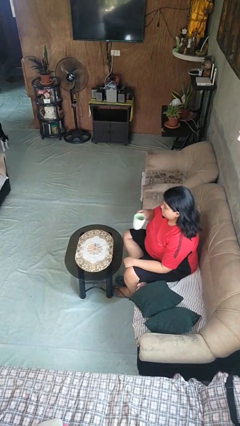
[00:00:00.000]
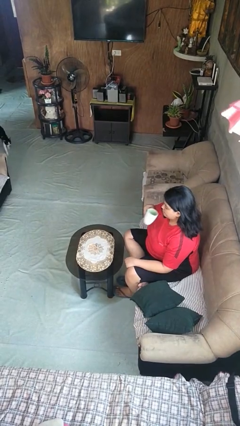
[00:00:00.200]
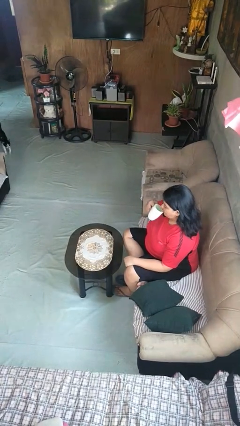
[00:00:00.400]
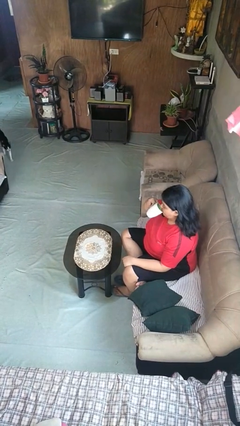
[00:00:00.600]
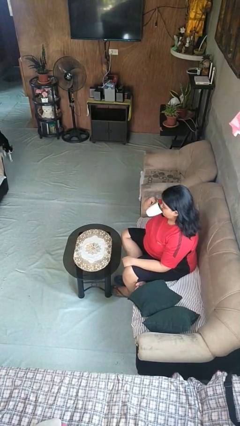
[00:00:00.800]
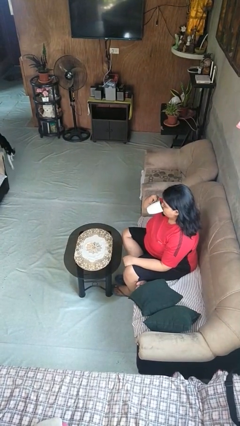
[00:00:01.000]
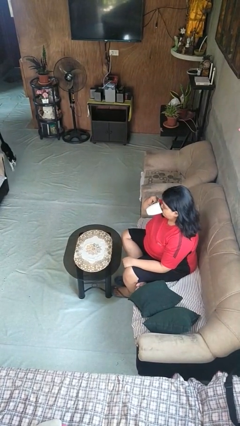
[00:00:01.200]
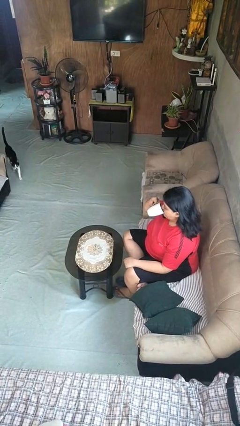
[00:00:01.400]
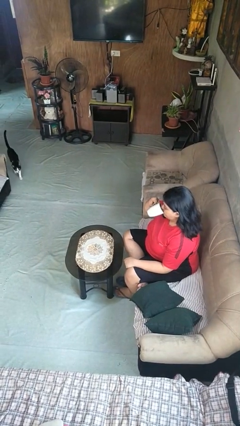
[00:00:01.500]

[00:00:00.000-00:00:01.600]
person drinks from mug

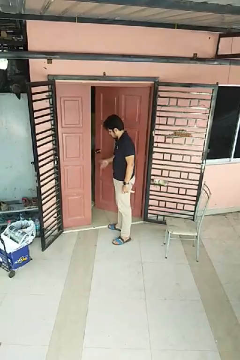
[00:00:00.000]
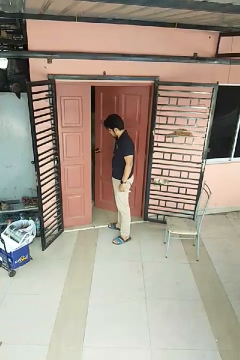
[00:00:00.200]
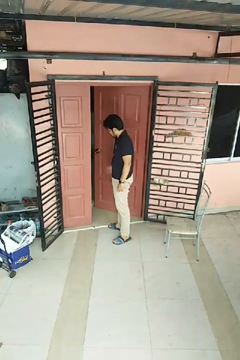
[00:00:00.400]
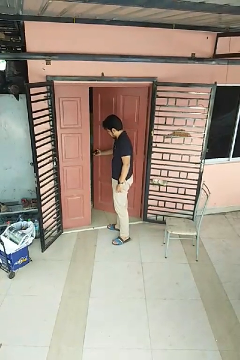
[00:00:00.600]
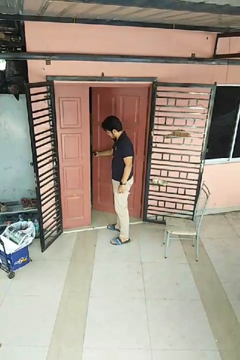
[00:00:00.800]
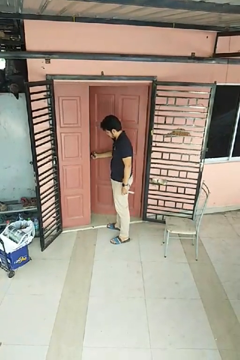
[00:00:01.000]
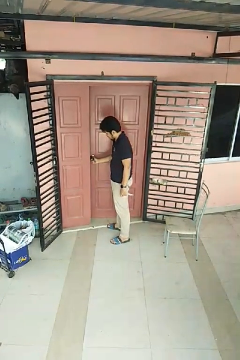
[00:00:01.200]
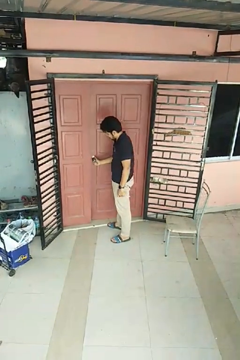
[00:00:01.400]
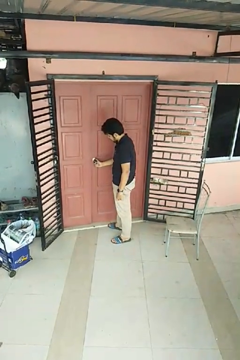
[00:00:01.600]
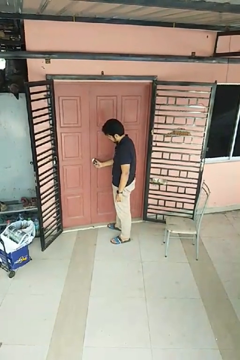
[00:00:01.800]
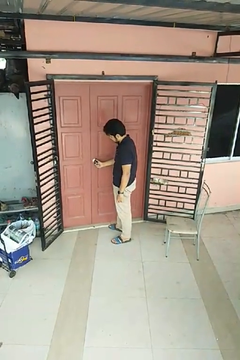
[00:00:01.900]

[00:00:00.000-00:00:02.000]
person closes facility door

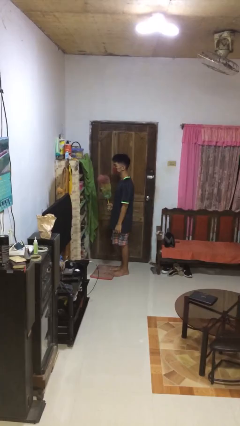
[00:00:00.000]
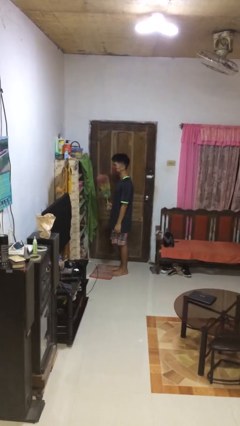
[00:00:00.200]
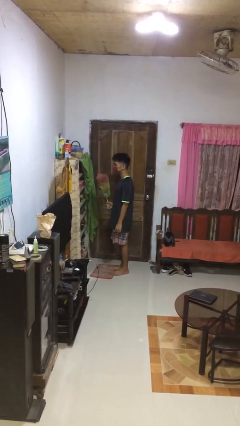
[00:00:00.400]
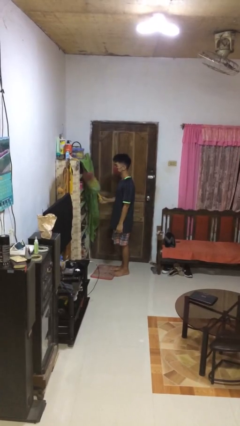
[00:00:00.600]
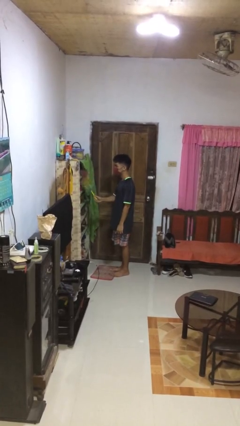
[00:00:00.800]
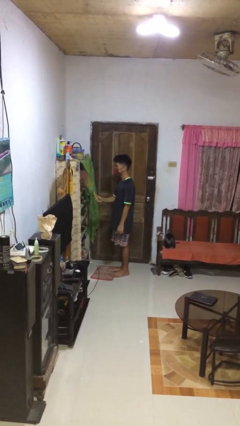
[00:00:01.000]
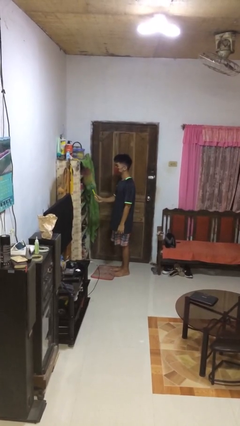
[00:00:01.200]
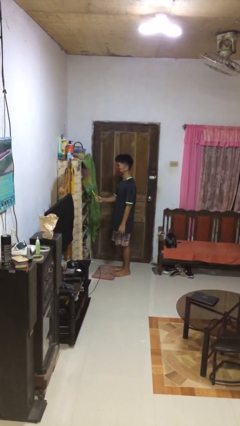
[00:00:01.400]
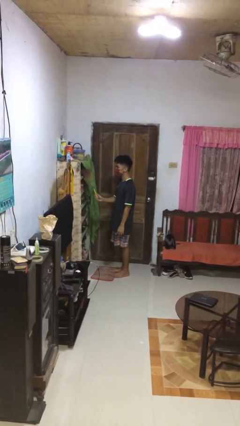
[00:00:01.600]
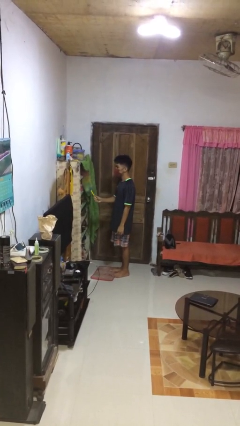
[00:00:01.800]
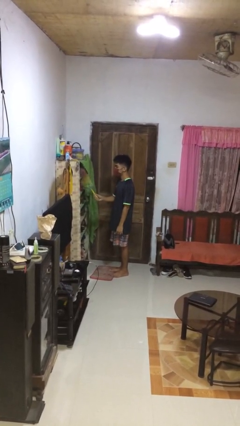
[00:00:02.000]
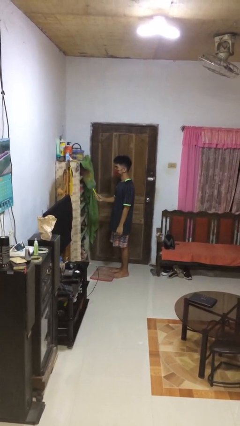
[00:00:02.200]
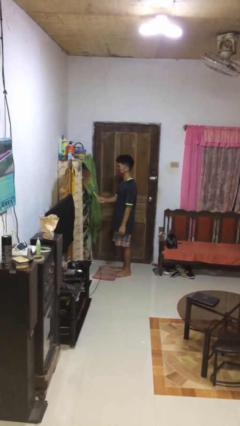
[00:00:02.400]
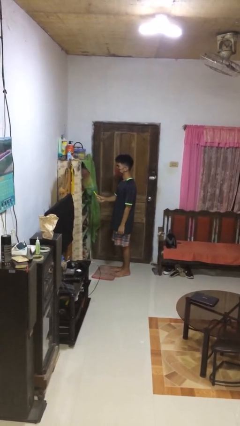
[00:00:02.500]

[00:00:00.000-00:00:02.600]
person dusts furniture

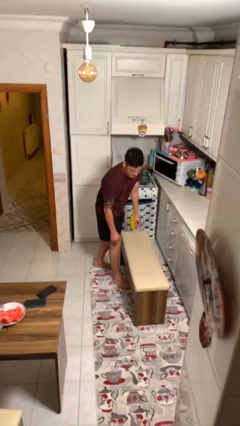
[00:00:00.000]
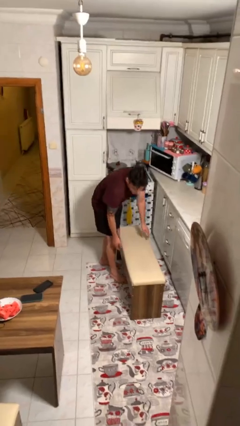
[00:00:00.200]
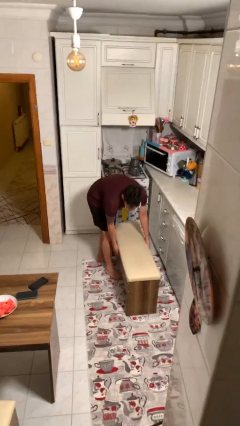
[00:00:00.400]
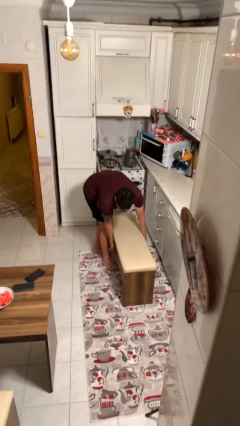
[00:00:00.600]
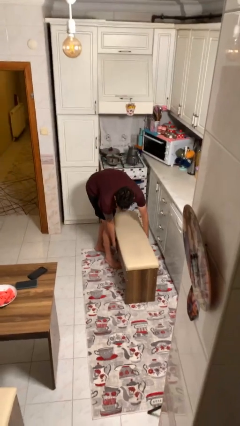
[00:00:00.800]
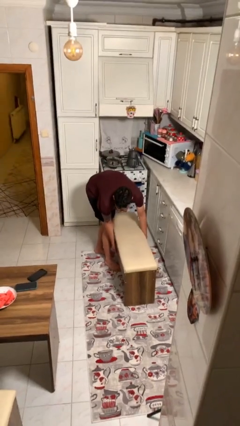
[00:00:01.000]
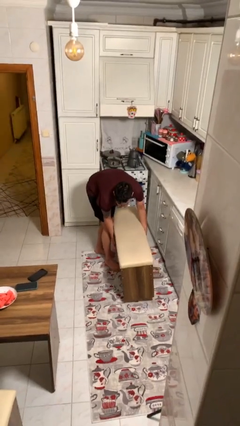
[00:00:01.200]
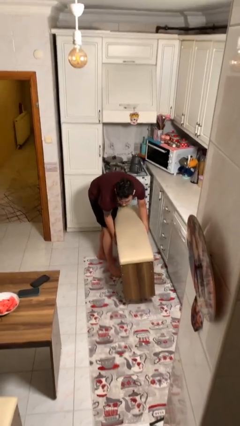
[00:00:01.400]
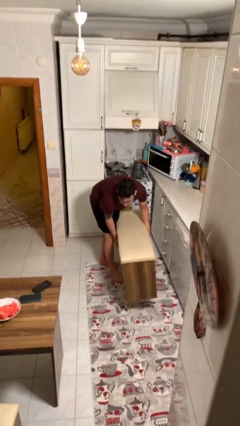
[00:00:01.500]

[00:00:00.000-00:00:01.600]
person picks up object from floor

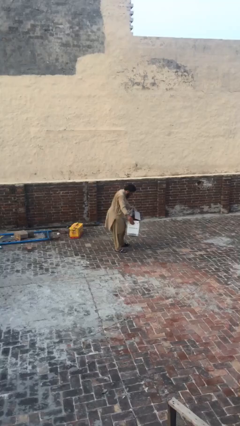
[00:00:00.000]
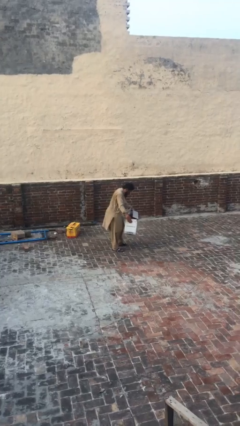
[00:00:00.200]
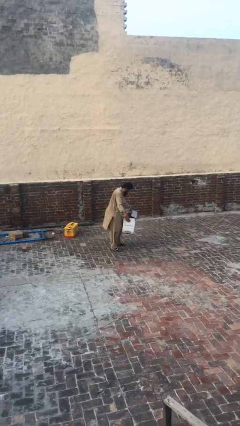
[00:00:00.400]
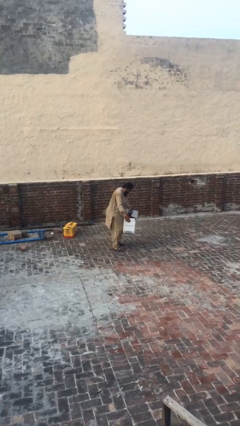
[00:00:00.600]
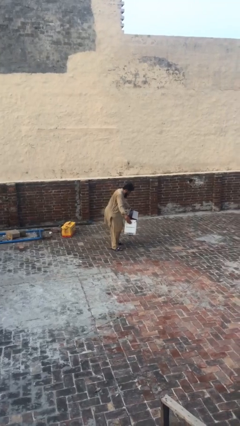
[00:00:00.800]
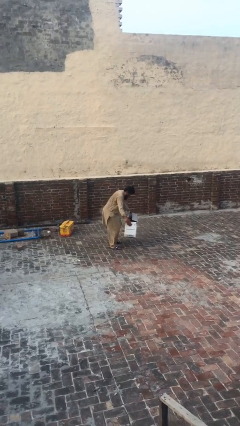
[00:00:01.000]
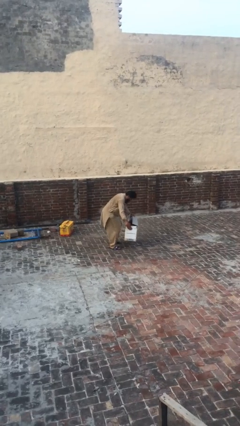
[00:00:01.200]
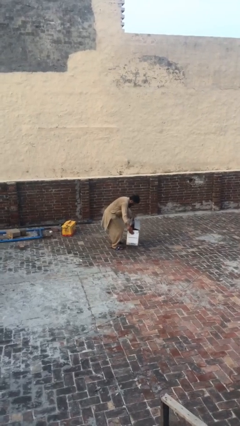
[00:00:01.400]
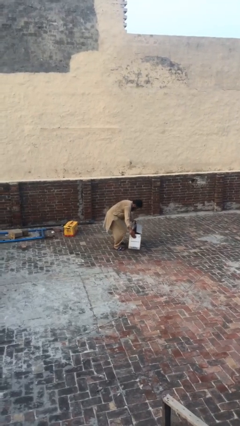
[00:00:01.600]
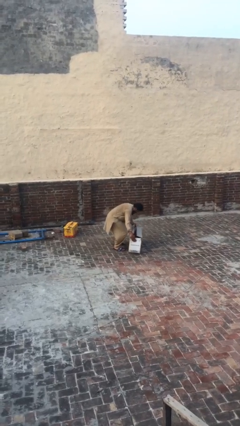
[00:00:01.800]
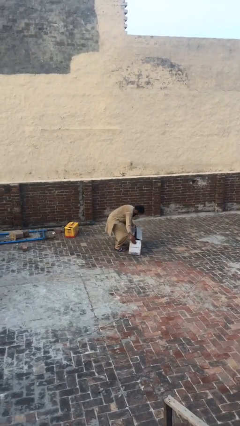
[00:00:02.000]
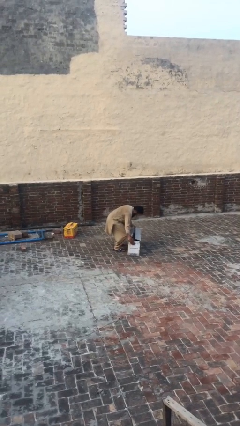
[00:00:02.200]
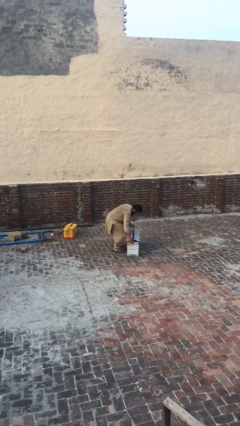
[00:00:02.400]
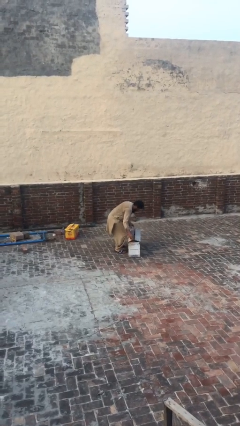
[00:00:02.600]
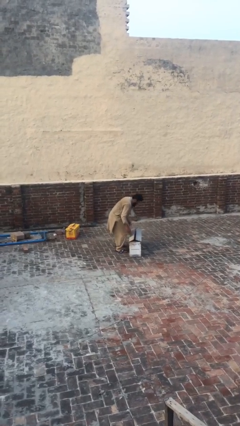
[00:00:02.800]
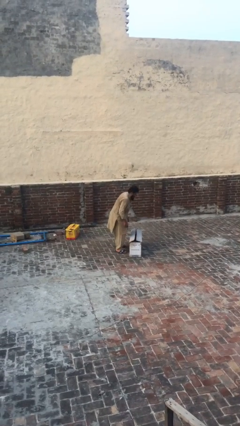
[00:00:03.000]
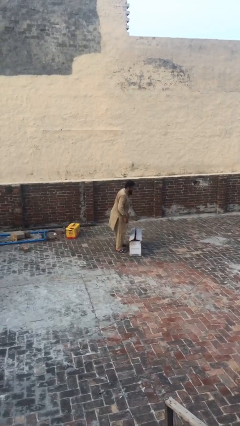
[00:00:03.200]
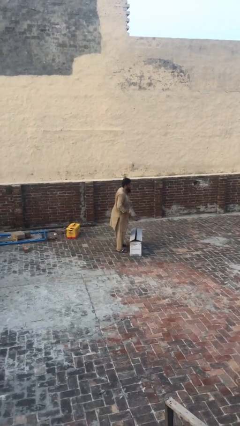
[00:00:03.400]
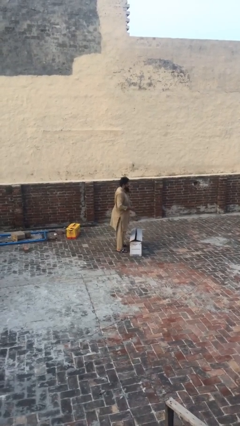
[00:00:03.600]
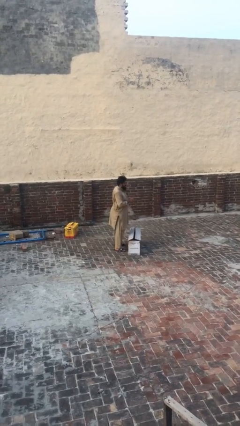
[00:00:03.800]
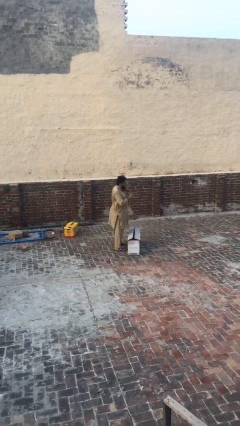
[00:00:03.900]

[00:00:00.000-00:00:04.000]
person puts down object on floor

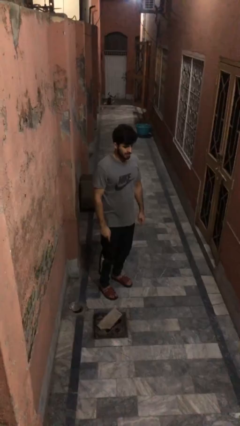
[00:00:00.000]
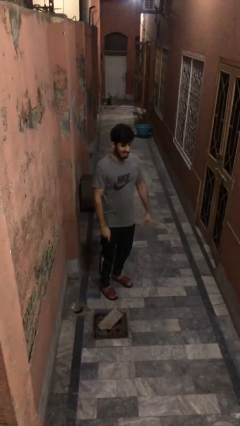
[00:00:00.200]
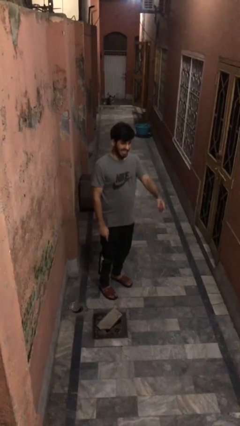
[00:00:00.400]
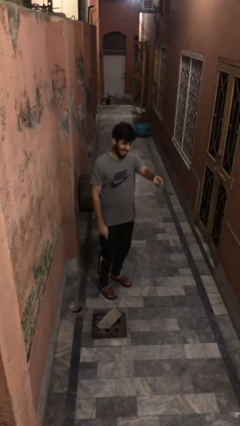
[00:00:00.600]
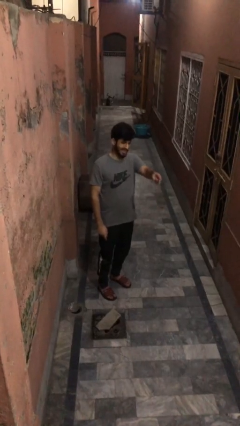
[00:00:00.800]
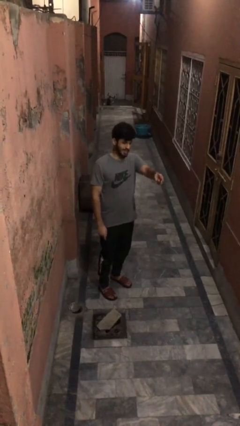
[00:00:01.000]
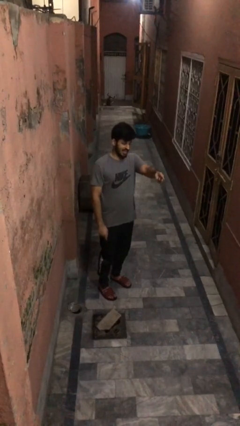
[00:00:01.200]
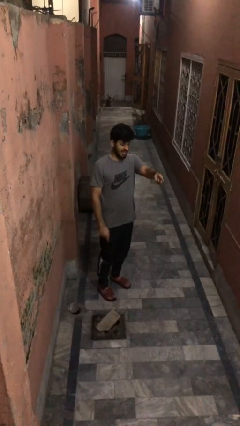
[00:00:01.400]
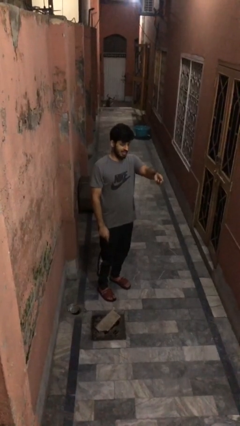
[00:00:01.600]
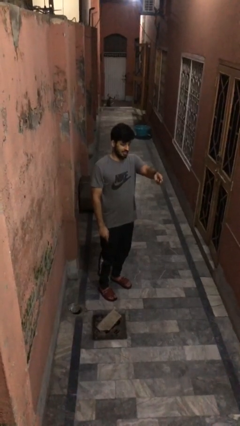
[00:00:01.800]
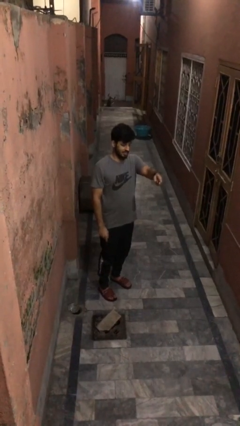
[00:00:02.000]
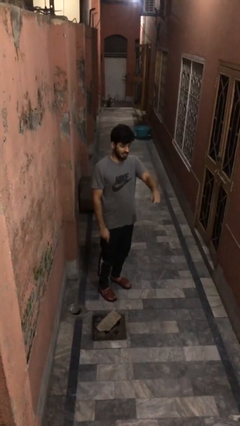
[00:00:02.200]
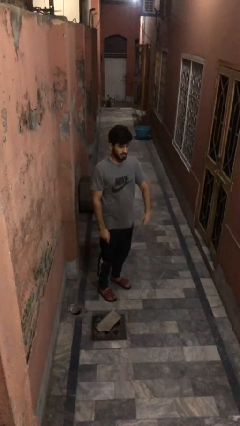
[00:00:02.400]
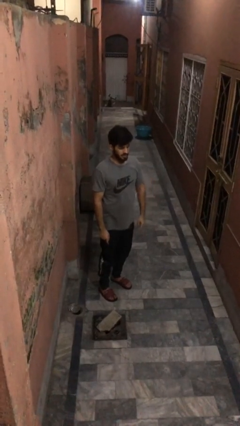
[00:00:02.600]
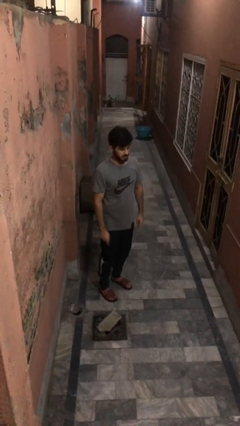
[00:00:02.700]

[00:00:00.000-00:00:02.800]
person points at person

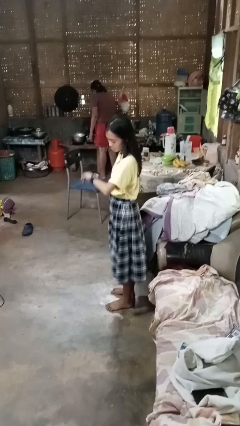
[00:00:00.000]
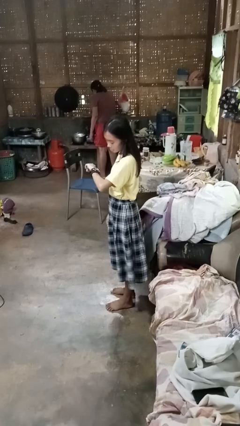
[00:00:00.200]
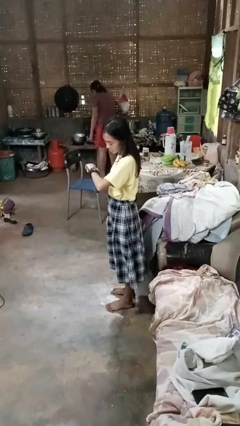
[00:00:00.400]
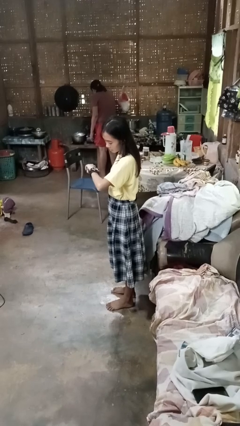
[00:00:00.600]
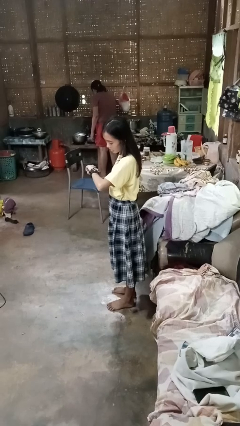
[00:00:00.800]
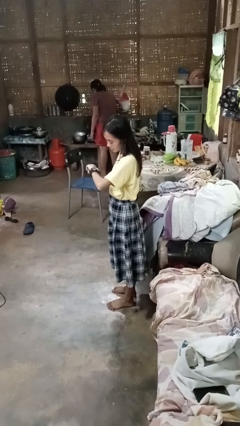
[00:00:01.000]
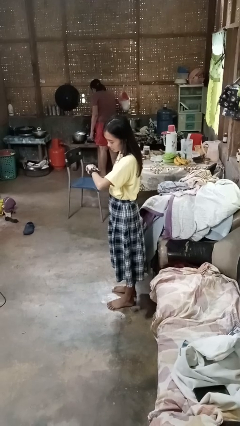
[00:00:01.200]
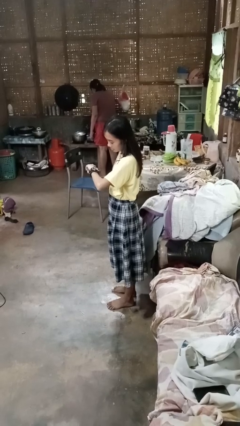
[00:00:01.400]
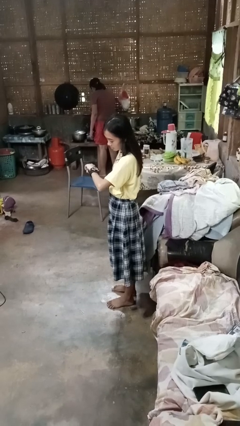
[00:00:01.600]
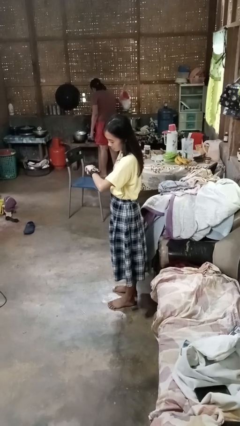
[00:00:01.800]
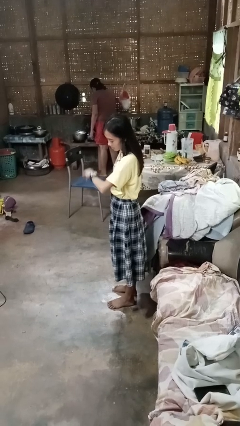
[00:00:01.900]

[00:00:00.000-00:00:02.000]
person looks at wristwatch

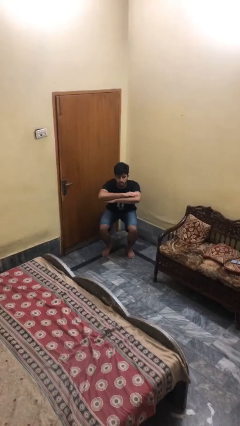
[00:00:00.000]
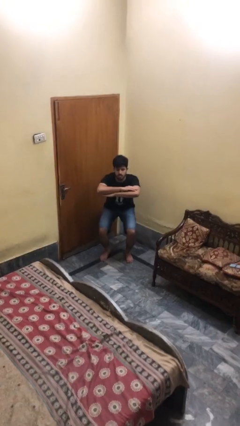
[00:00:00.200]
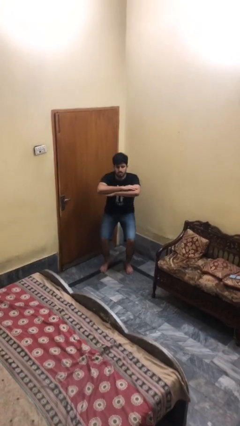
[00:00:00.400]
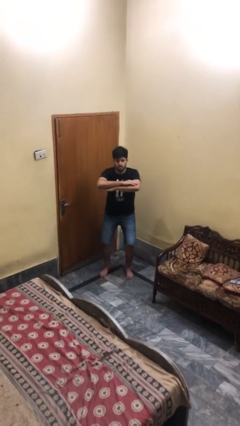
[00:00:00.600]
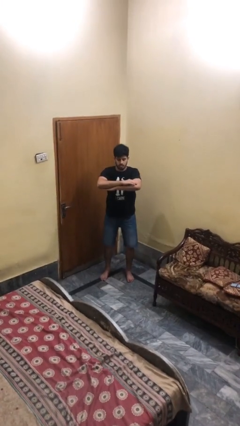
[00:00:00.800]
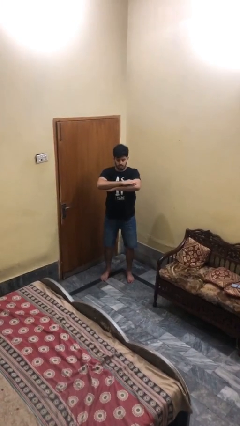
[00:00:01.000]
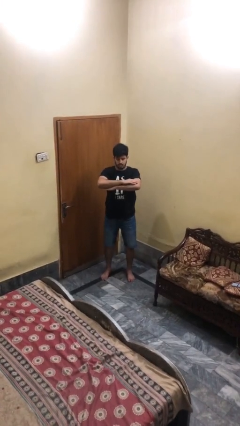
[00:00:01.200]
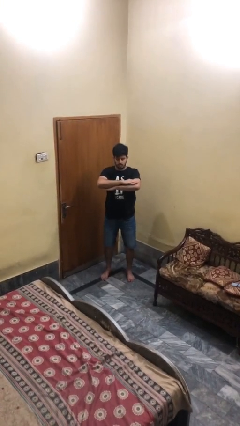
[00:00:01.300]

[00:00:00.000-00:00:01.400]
person stands up
